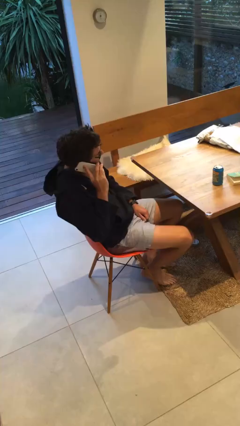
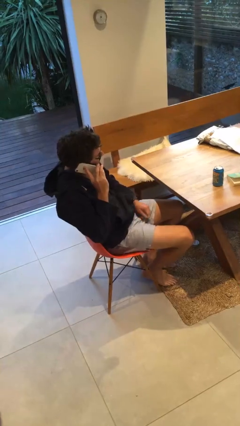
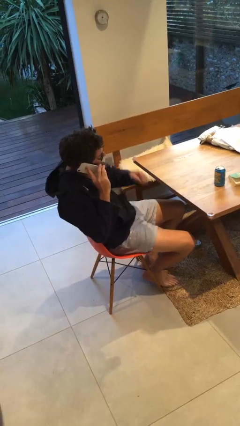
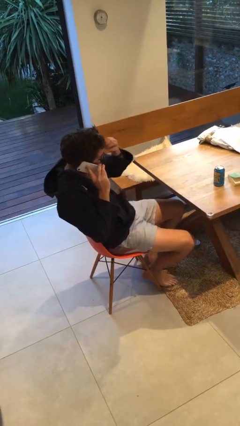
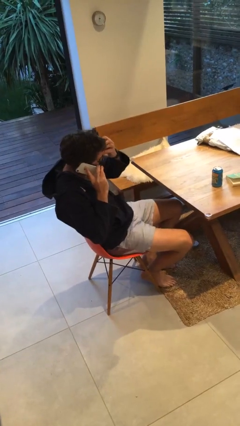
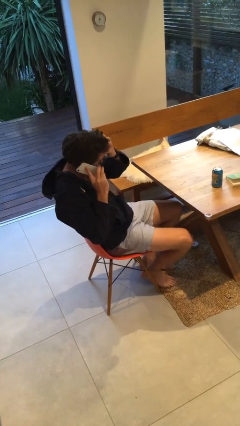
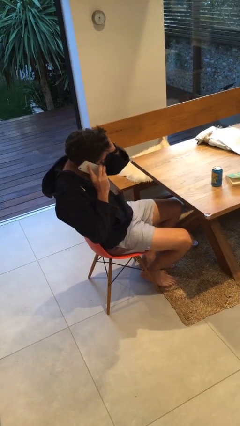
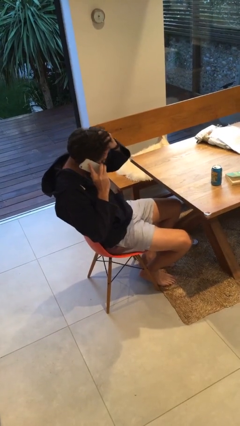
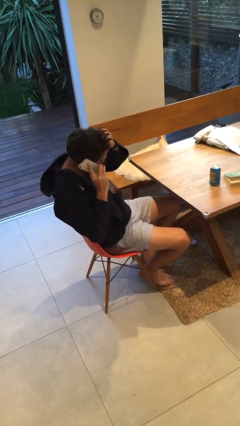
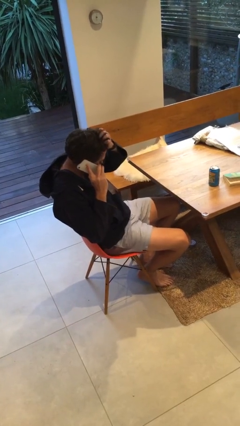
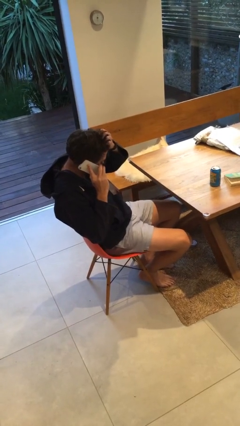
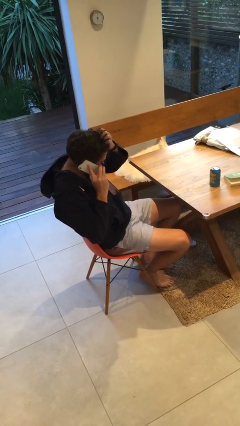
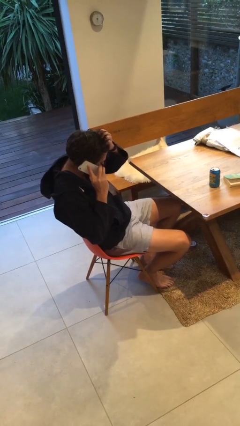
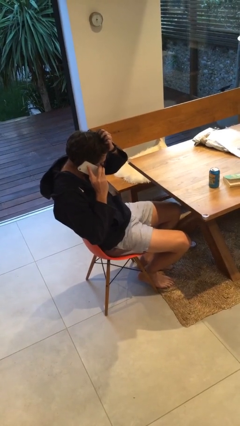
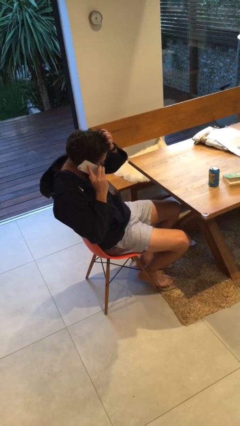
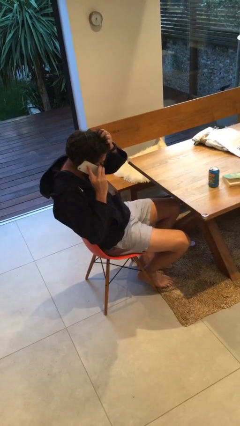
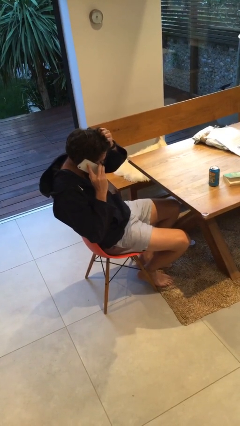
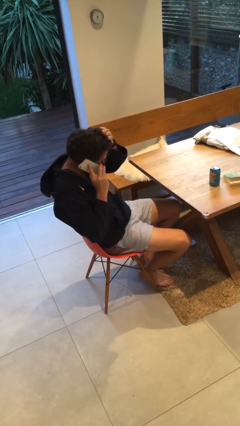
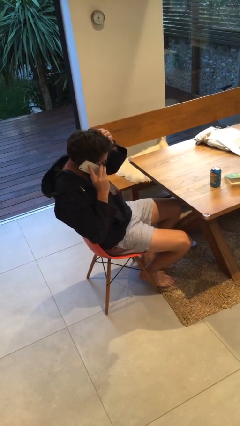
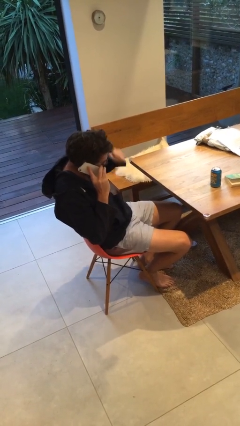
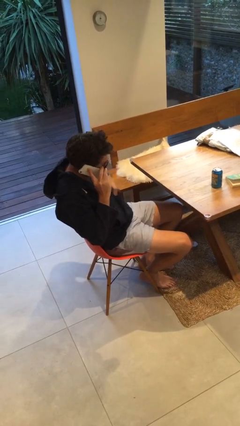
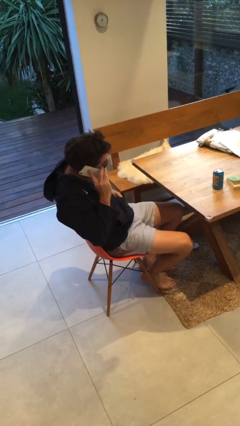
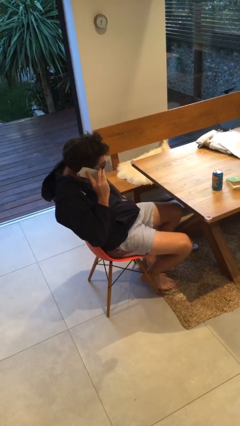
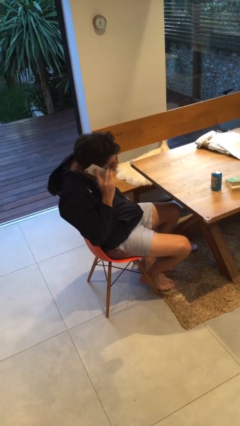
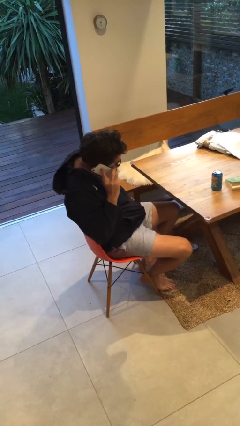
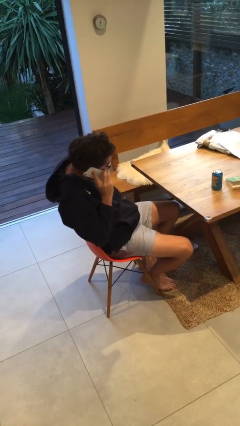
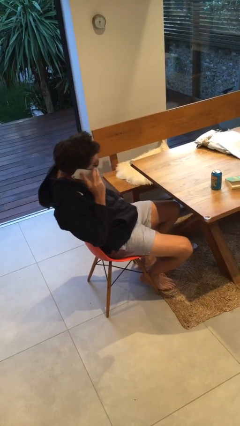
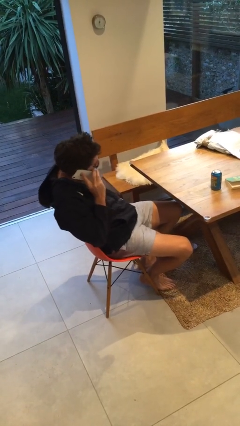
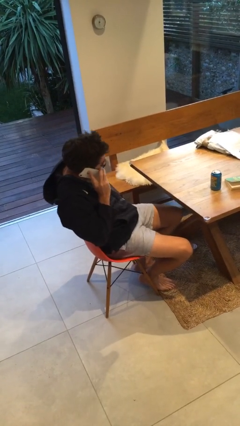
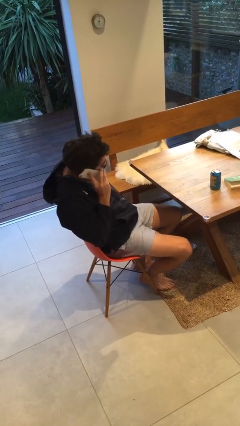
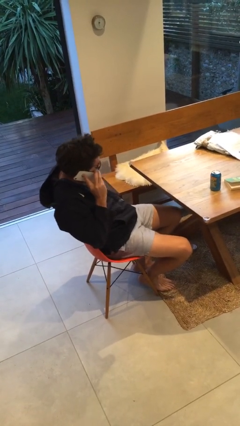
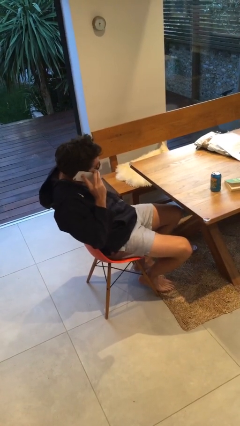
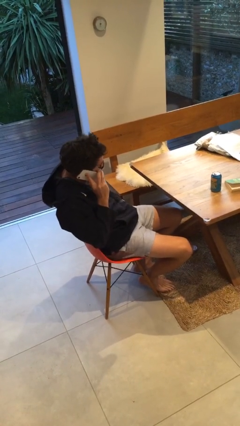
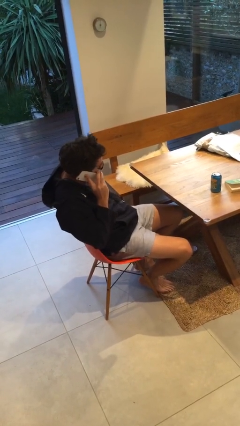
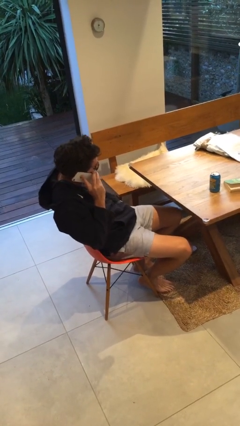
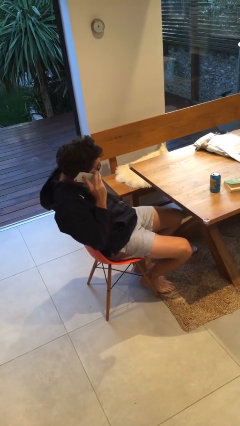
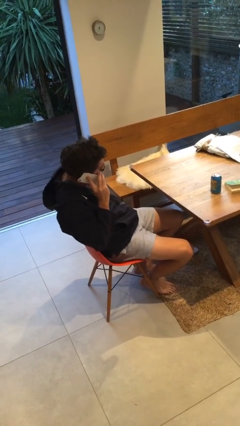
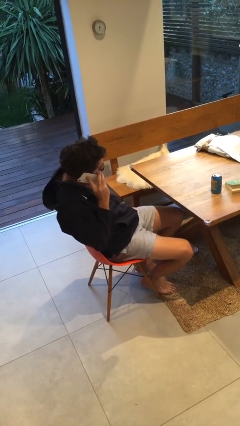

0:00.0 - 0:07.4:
person talks on phone

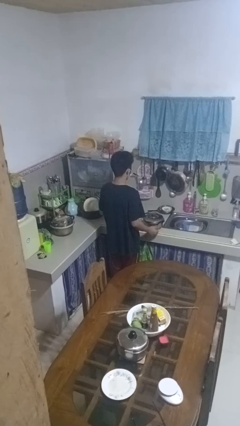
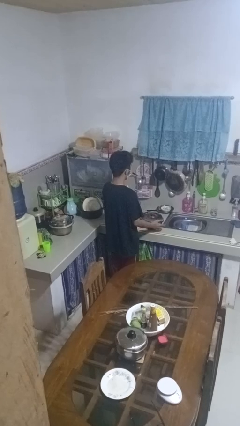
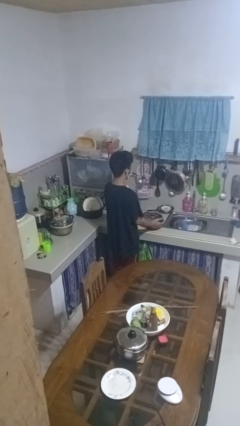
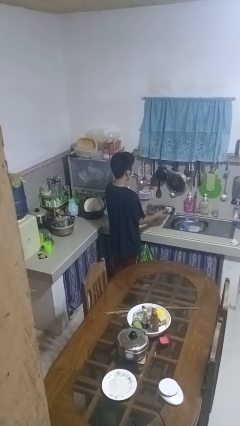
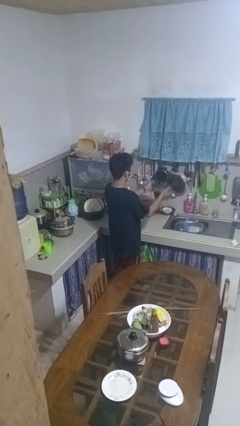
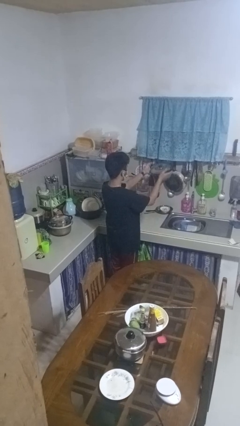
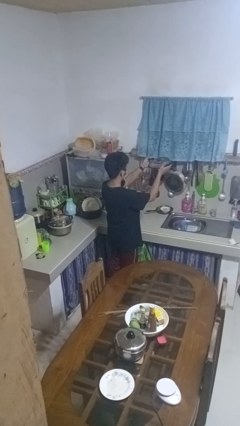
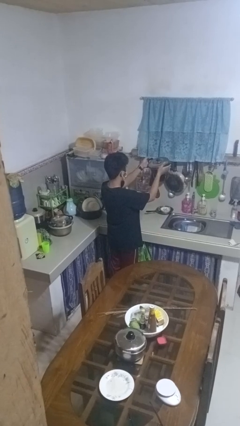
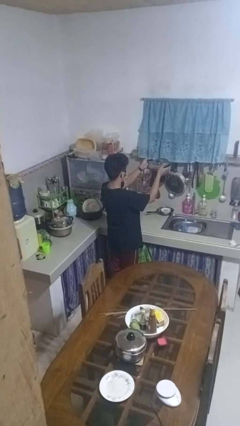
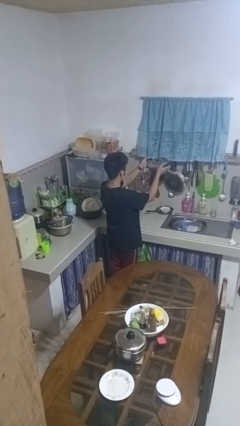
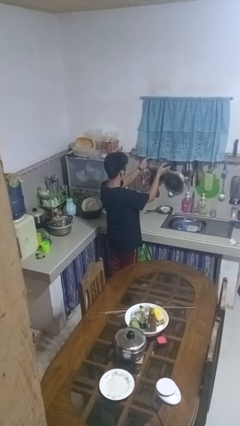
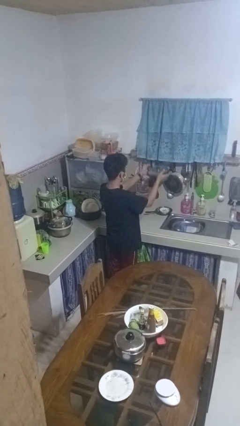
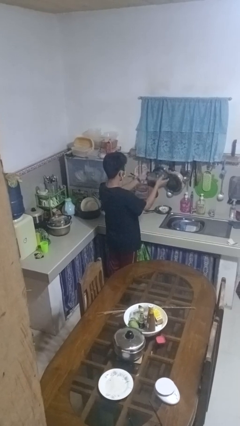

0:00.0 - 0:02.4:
person picks up object from countertop

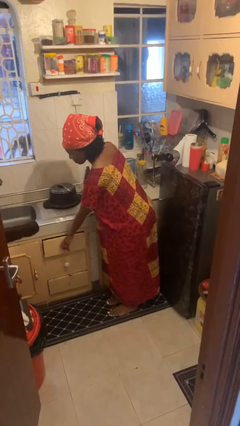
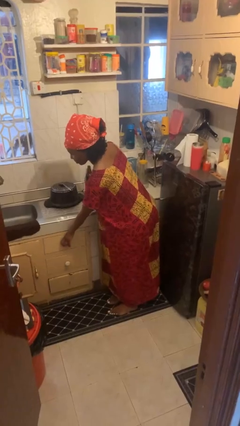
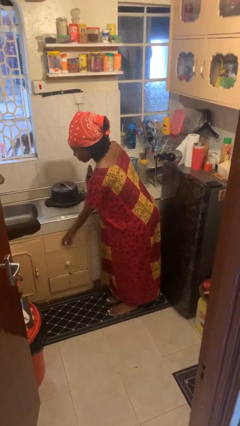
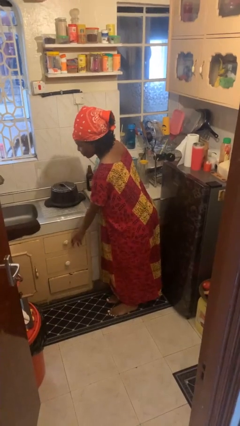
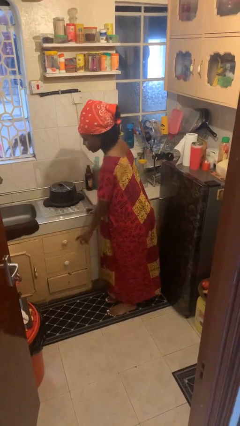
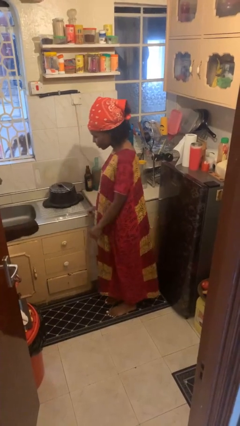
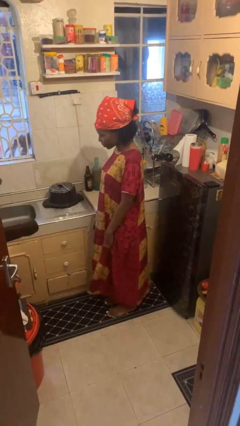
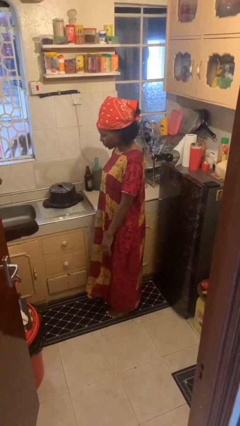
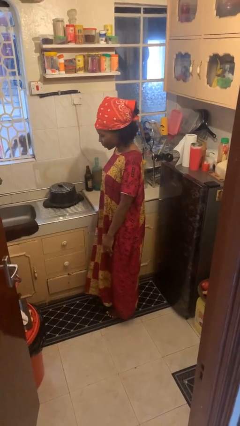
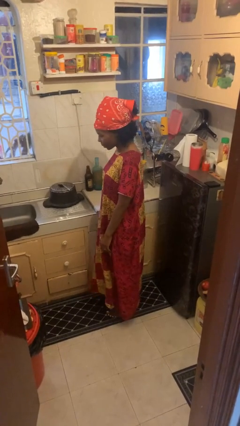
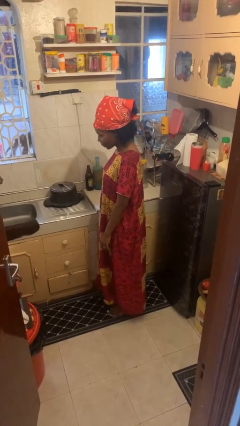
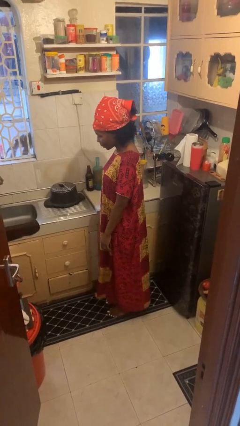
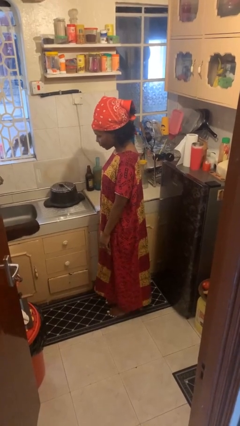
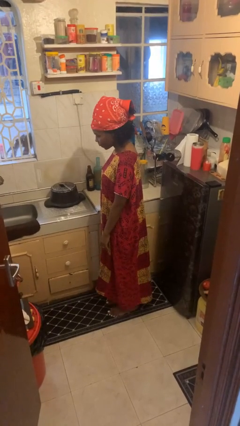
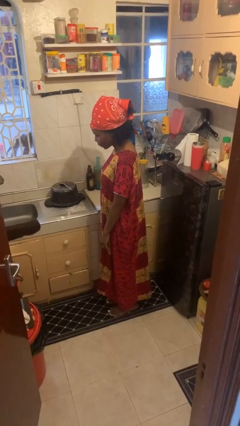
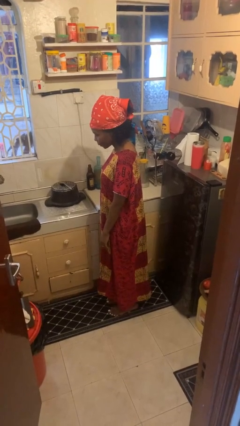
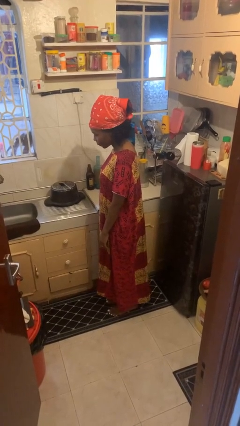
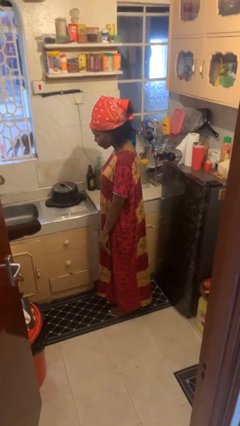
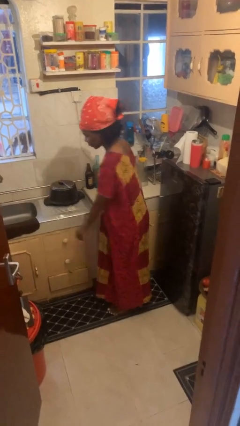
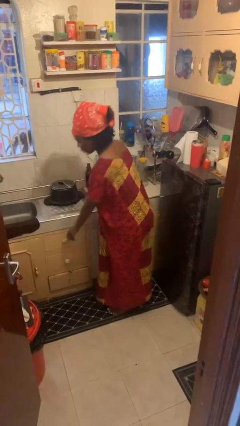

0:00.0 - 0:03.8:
person closes kitchen drawer

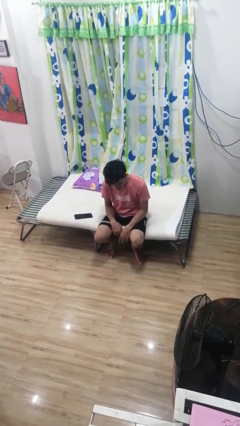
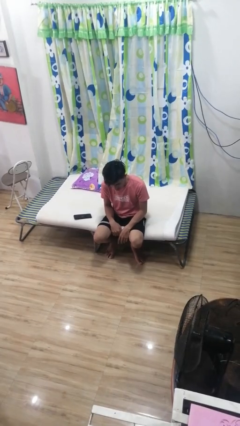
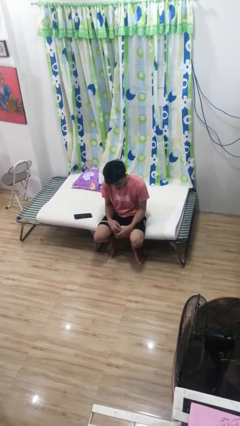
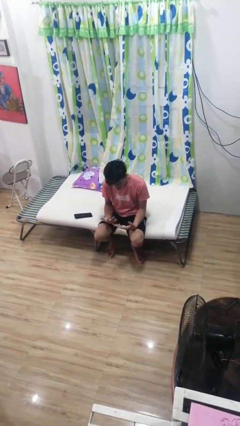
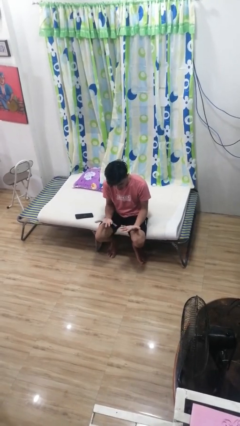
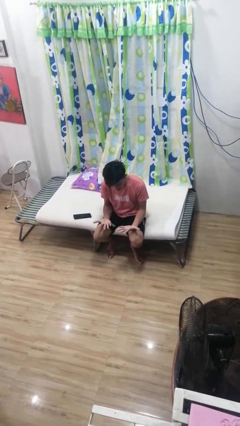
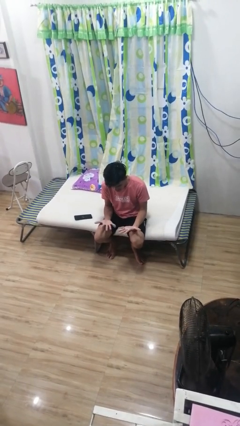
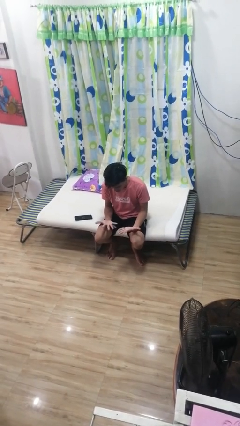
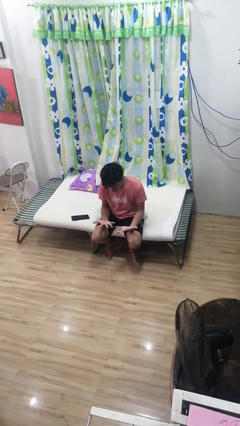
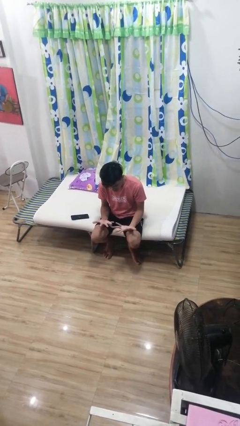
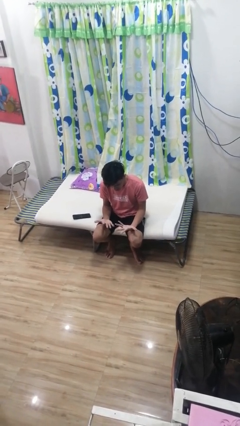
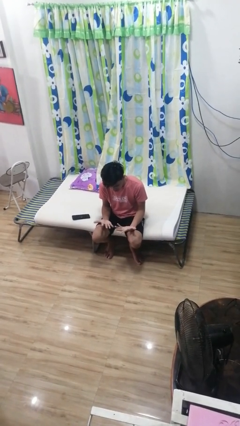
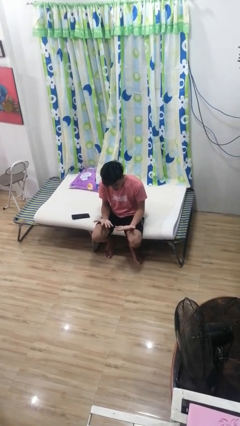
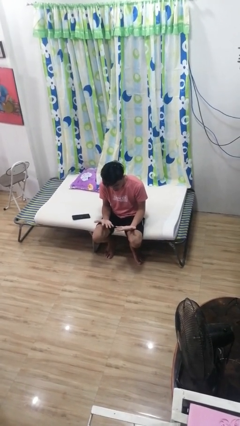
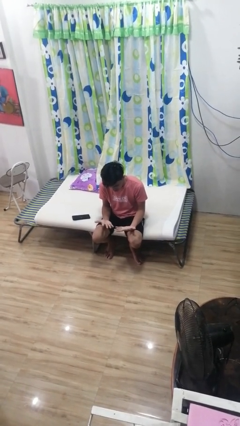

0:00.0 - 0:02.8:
person looks at hands in lap

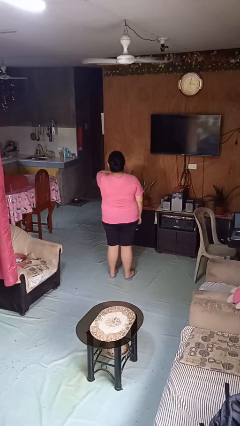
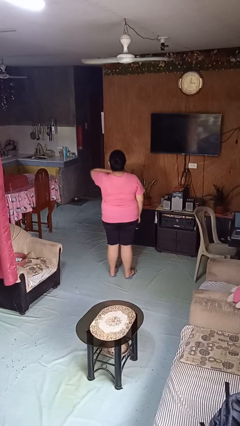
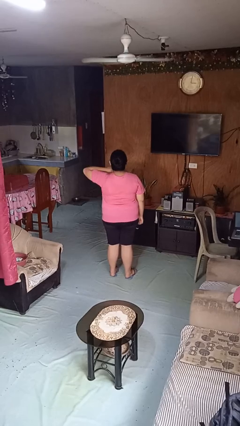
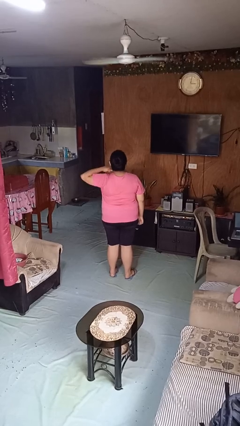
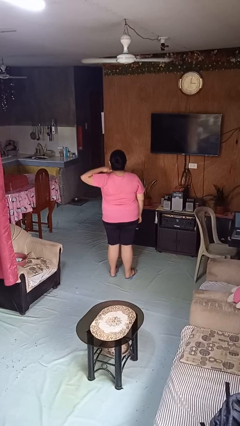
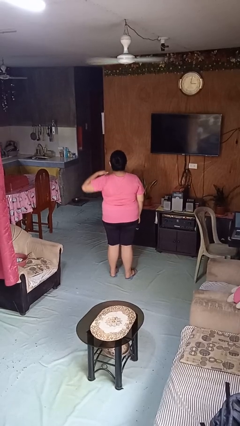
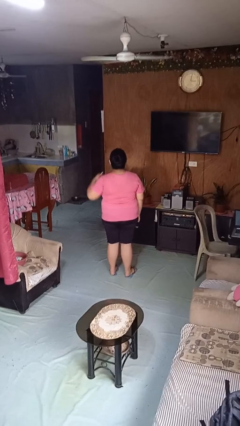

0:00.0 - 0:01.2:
person gestures cut

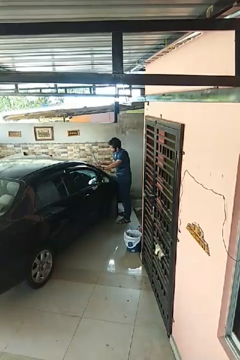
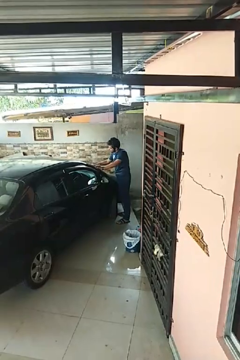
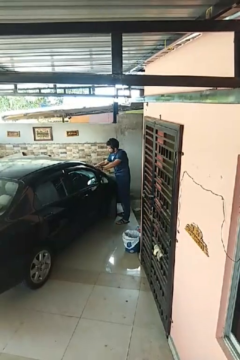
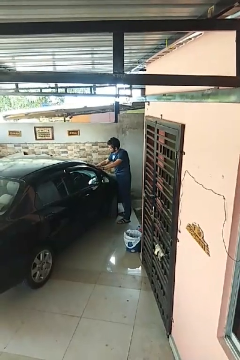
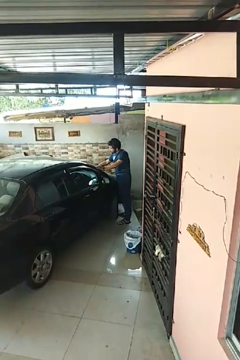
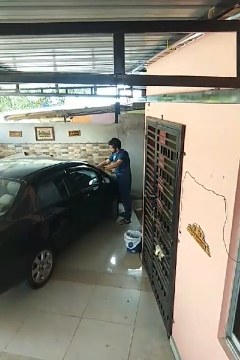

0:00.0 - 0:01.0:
person flips down car wipers
